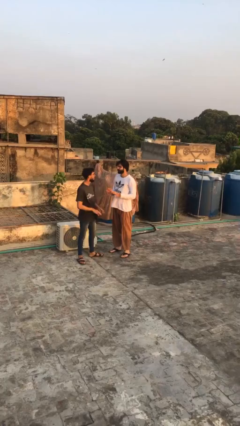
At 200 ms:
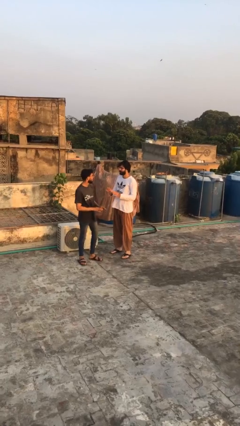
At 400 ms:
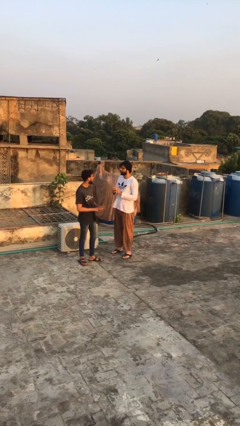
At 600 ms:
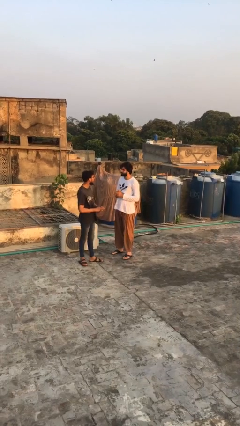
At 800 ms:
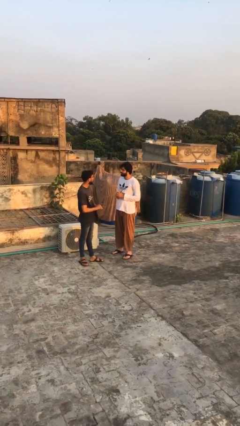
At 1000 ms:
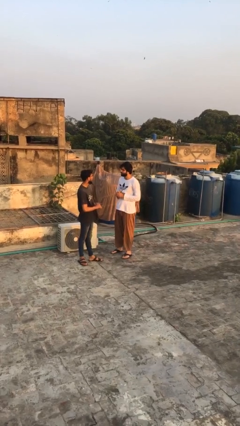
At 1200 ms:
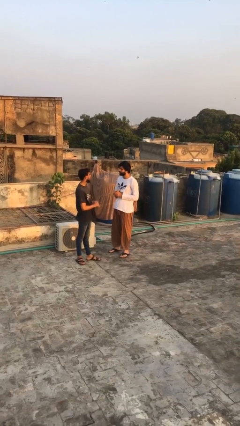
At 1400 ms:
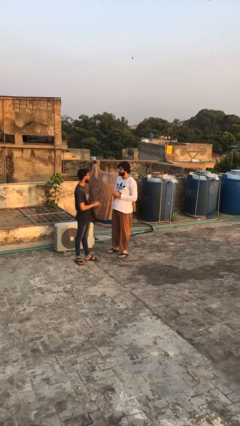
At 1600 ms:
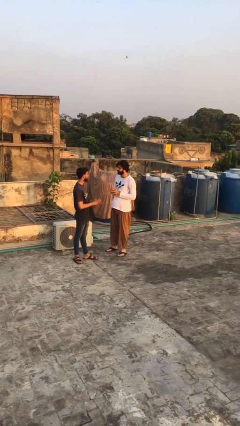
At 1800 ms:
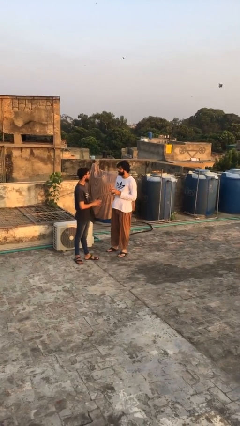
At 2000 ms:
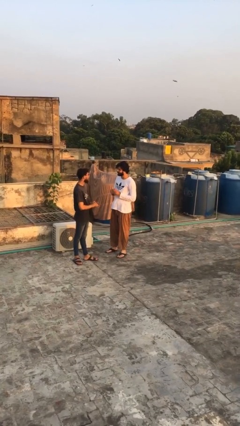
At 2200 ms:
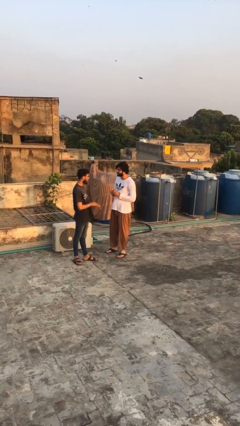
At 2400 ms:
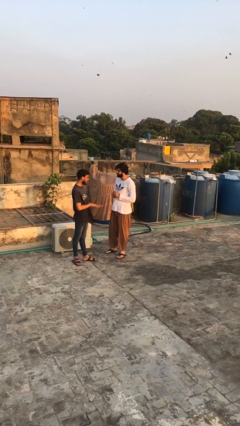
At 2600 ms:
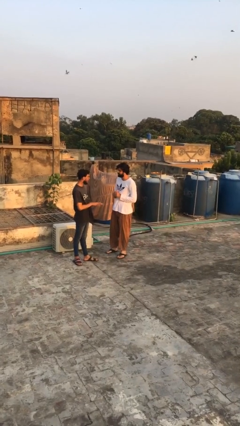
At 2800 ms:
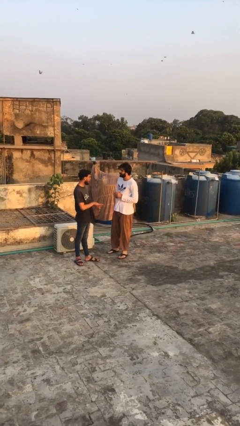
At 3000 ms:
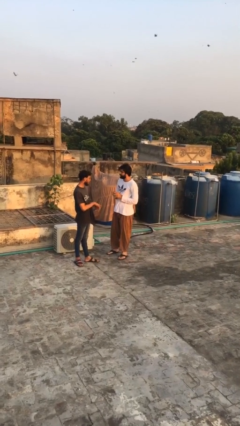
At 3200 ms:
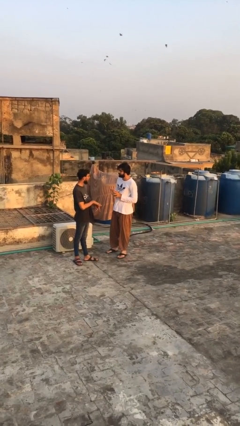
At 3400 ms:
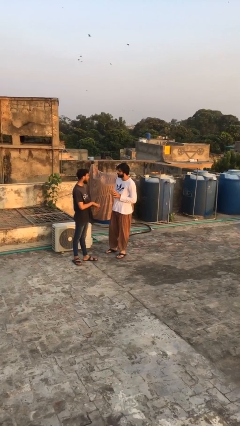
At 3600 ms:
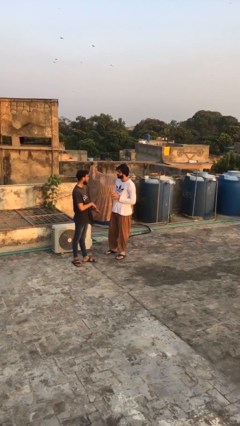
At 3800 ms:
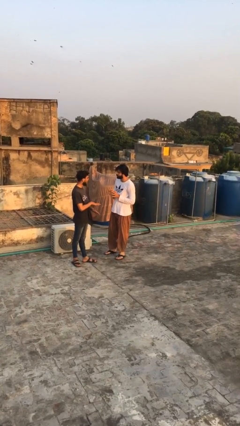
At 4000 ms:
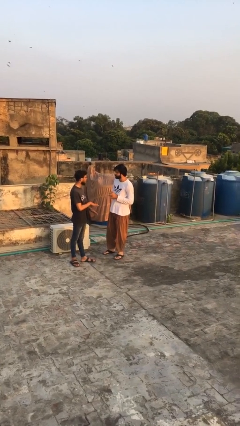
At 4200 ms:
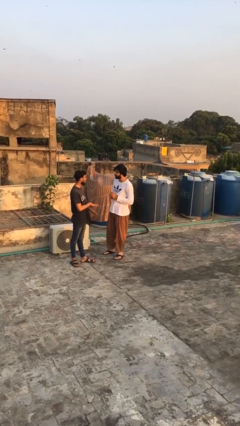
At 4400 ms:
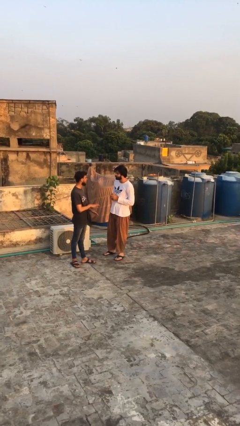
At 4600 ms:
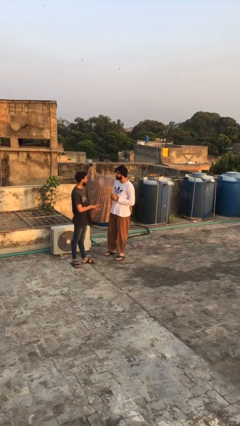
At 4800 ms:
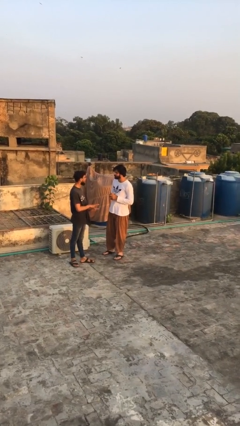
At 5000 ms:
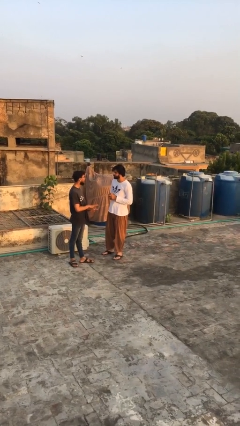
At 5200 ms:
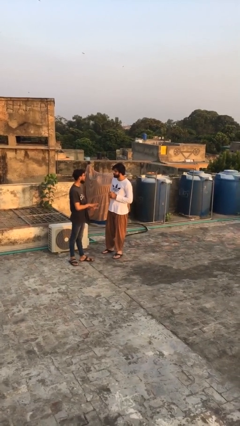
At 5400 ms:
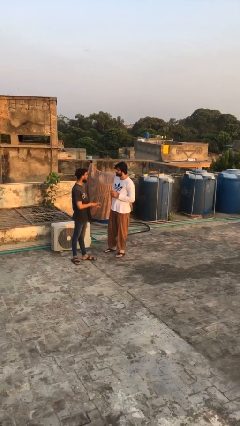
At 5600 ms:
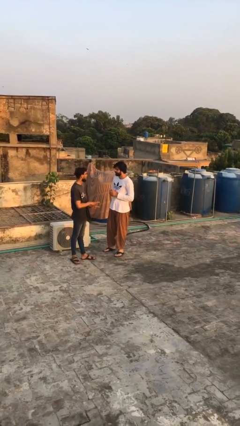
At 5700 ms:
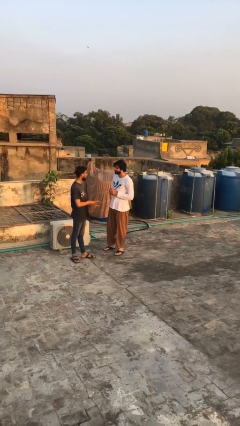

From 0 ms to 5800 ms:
person talks to person

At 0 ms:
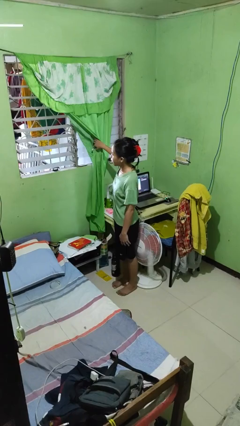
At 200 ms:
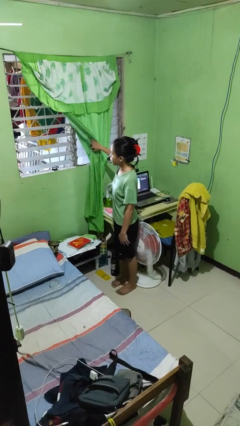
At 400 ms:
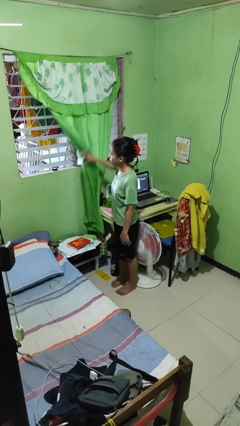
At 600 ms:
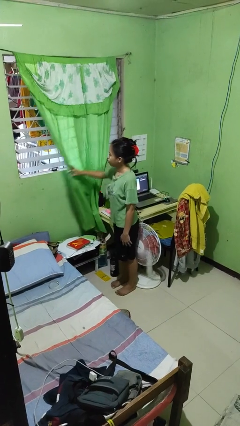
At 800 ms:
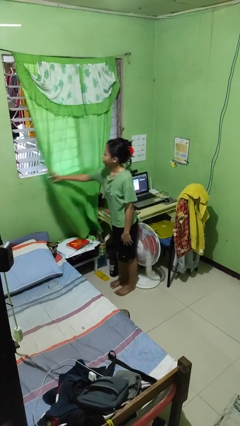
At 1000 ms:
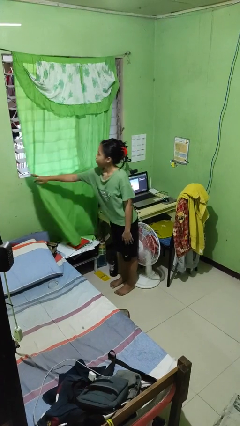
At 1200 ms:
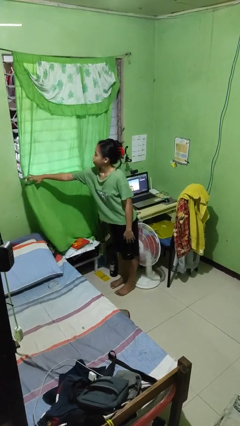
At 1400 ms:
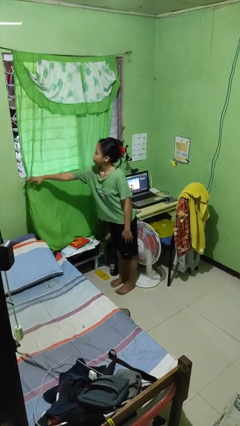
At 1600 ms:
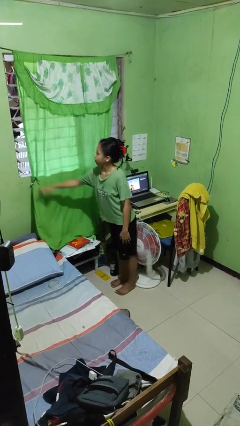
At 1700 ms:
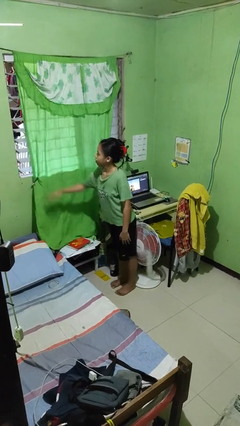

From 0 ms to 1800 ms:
person closes curtains

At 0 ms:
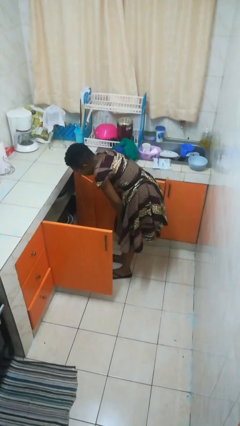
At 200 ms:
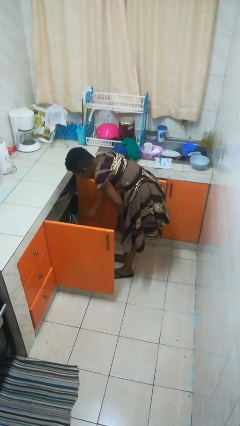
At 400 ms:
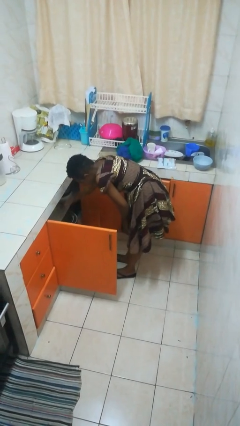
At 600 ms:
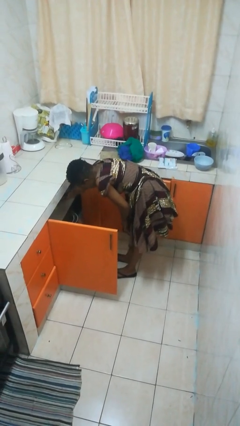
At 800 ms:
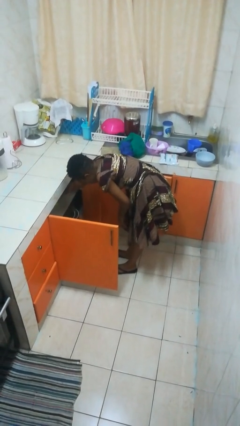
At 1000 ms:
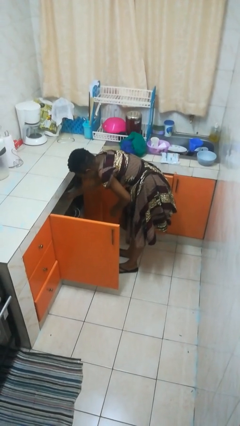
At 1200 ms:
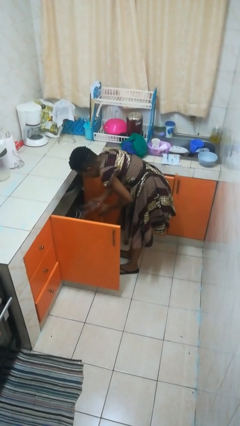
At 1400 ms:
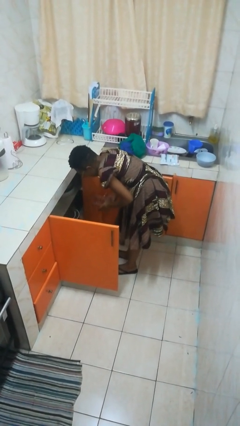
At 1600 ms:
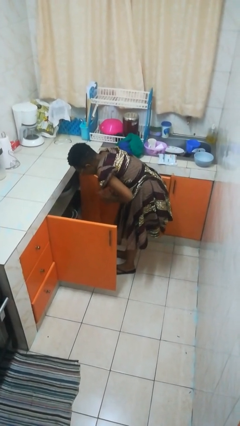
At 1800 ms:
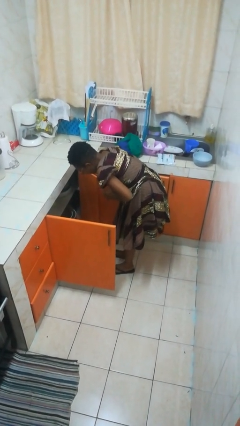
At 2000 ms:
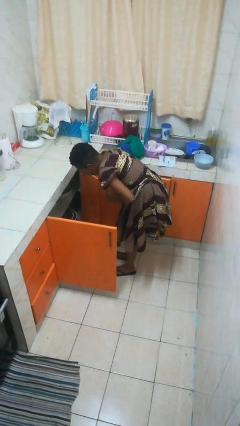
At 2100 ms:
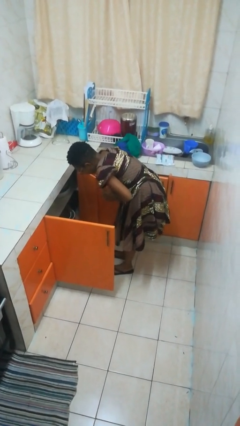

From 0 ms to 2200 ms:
person takes object from cabinet

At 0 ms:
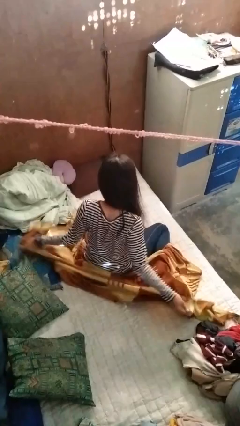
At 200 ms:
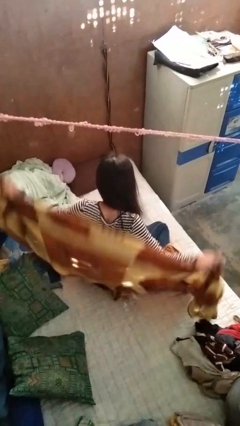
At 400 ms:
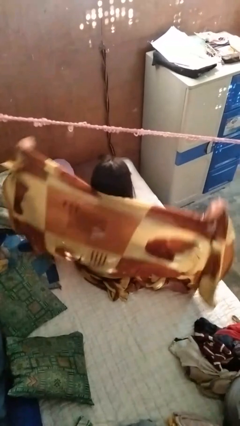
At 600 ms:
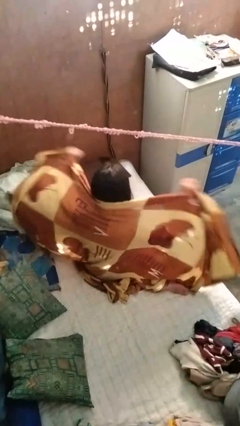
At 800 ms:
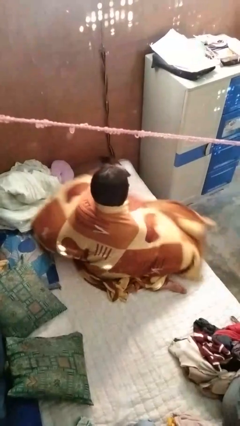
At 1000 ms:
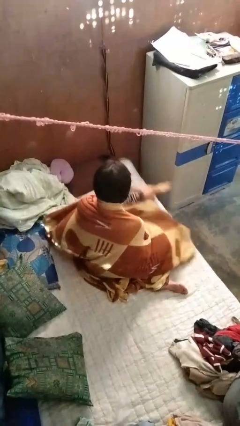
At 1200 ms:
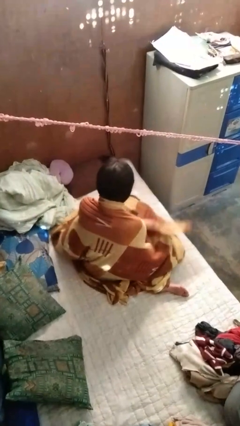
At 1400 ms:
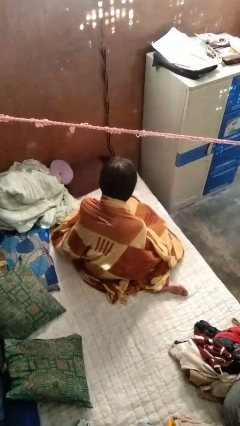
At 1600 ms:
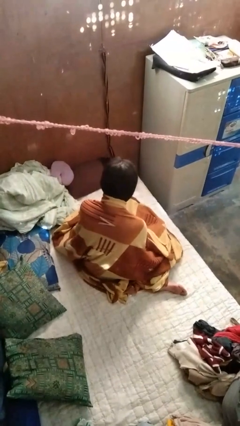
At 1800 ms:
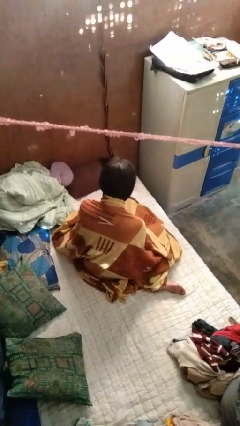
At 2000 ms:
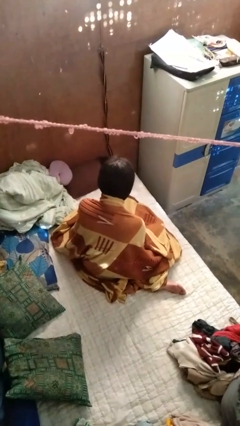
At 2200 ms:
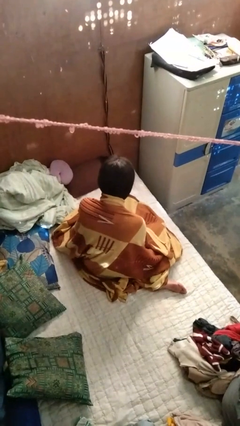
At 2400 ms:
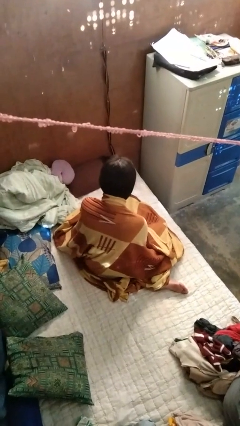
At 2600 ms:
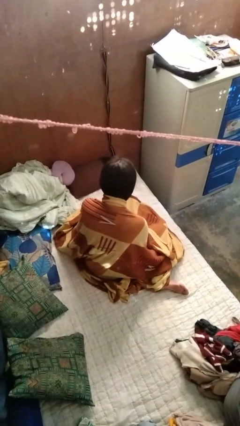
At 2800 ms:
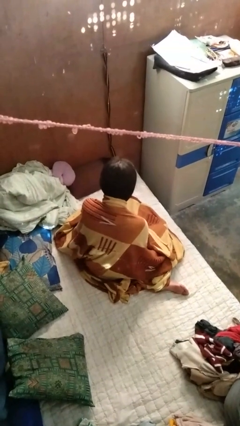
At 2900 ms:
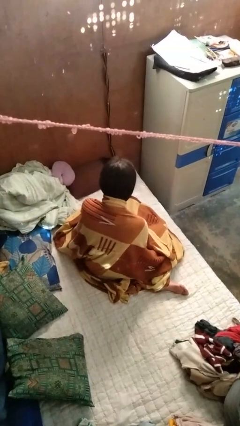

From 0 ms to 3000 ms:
person covers with blanket

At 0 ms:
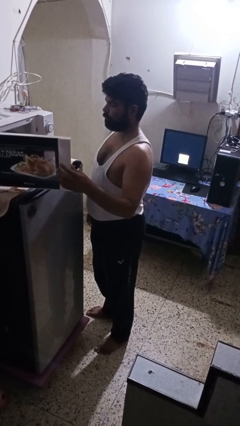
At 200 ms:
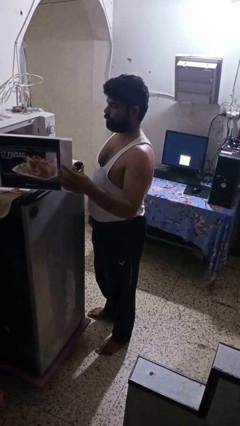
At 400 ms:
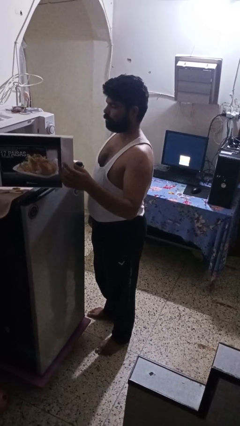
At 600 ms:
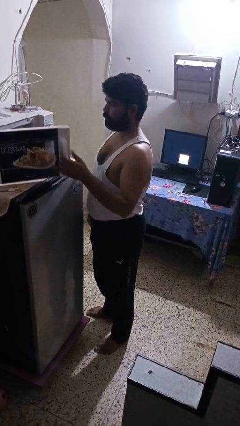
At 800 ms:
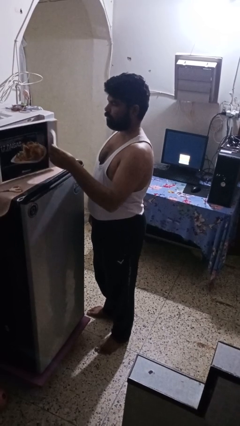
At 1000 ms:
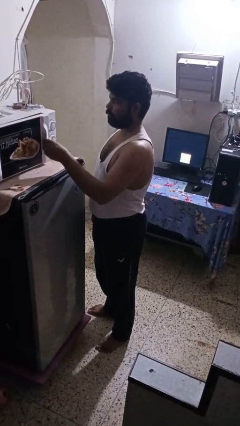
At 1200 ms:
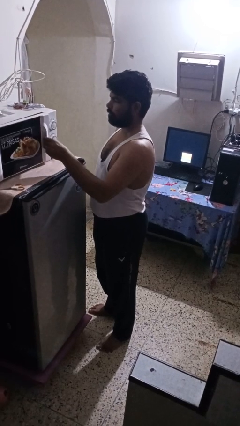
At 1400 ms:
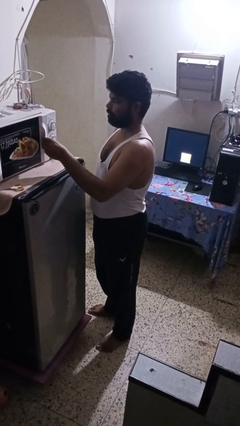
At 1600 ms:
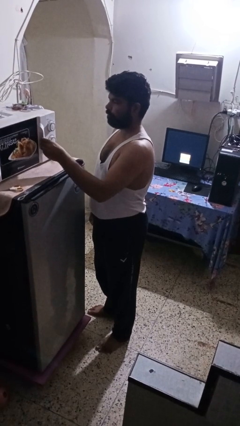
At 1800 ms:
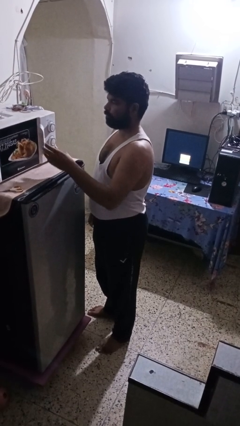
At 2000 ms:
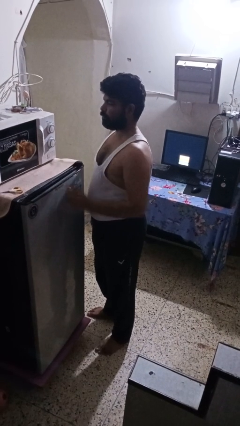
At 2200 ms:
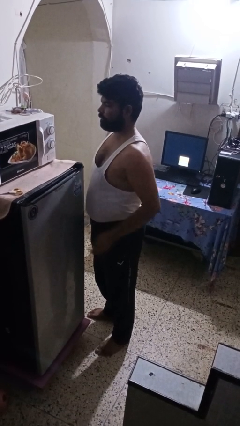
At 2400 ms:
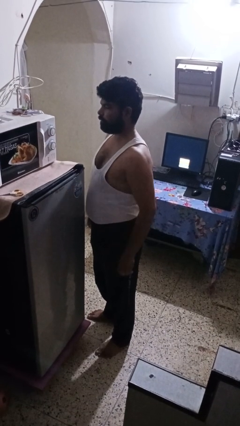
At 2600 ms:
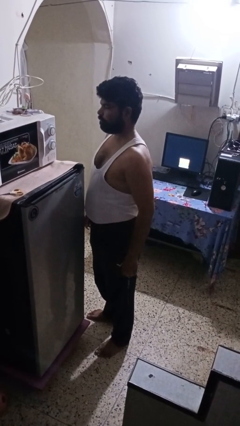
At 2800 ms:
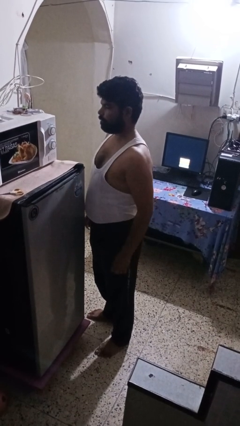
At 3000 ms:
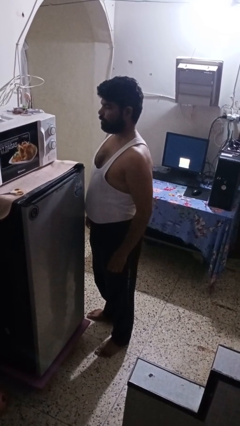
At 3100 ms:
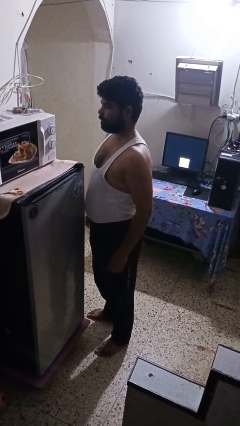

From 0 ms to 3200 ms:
person closes microwave

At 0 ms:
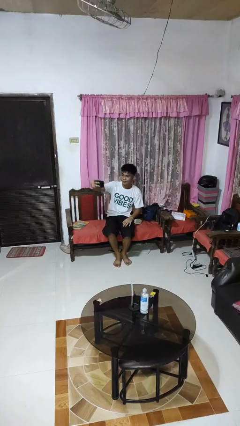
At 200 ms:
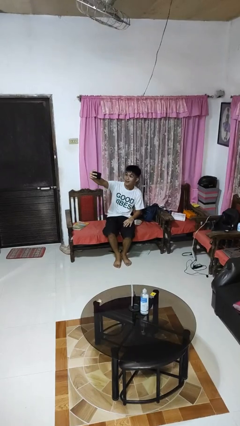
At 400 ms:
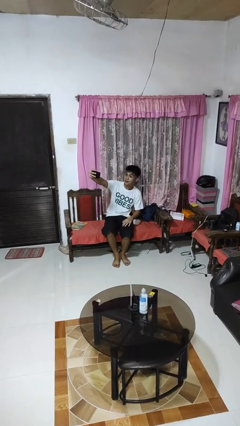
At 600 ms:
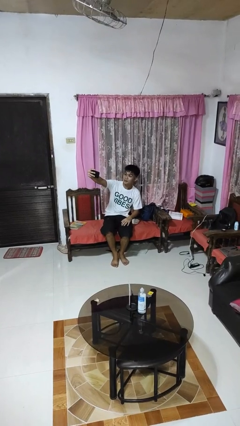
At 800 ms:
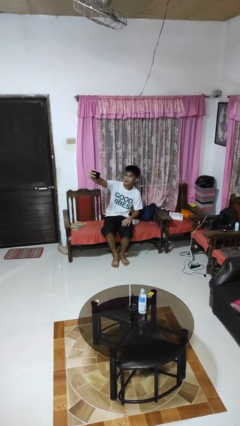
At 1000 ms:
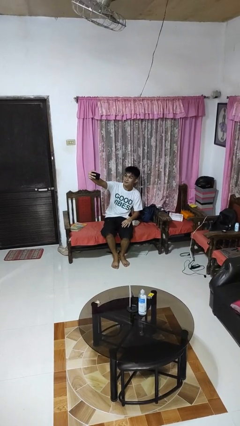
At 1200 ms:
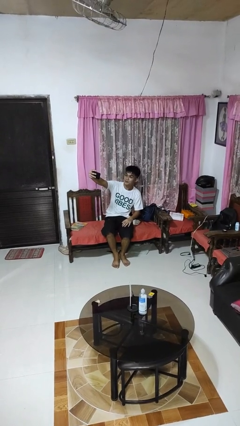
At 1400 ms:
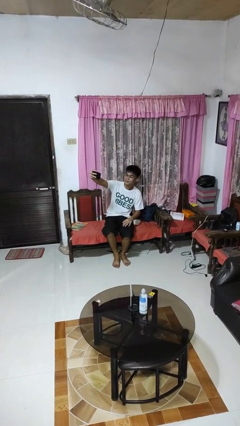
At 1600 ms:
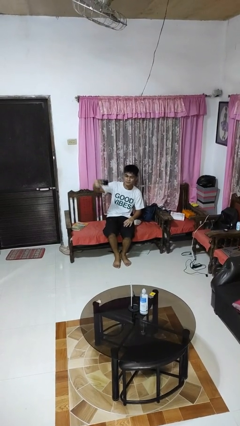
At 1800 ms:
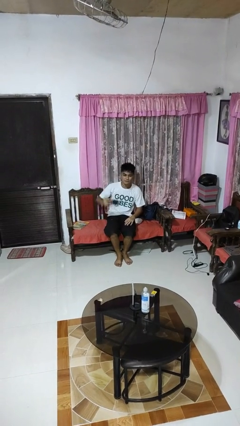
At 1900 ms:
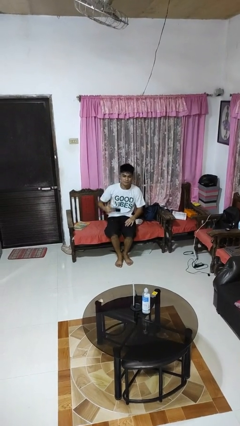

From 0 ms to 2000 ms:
person takes selfie
